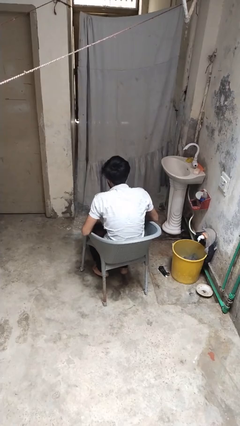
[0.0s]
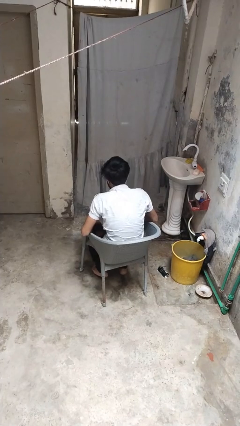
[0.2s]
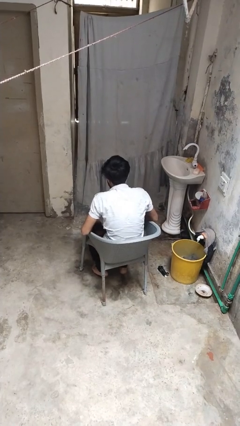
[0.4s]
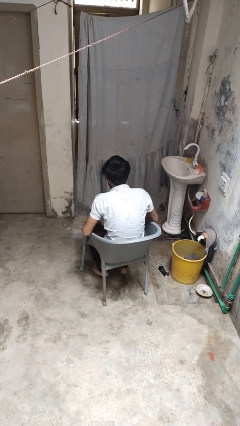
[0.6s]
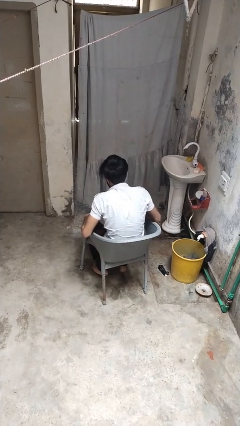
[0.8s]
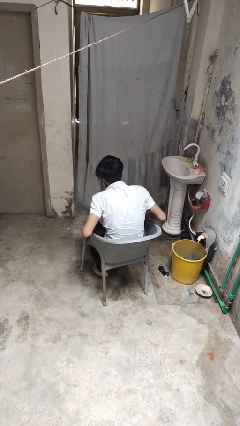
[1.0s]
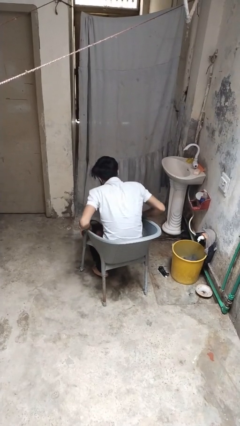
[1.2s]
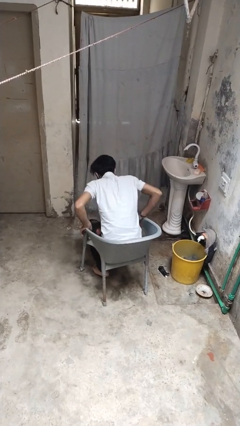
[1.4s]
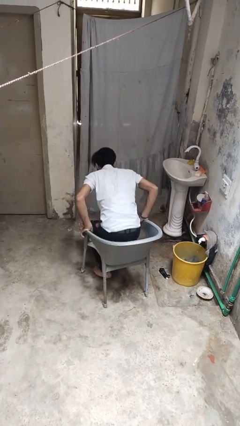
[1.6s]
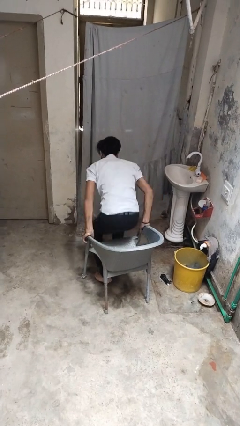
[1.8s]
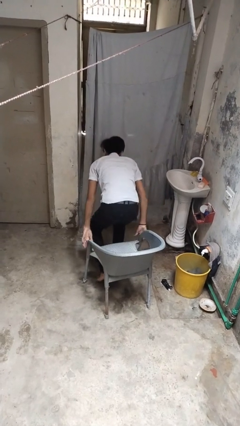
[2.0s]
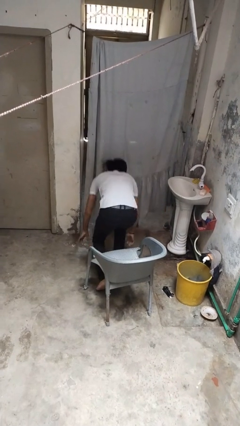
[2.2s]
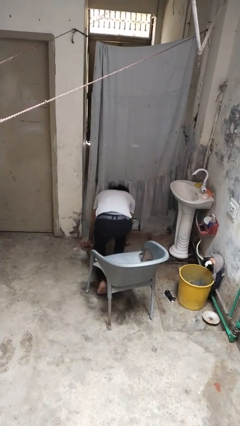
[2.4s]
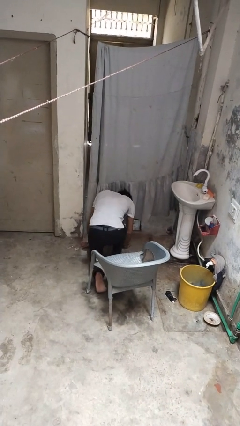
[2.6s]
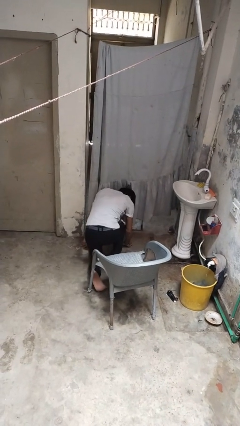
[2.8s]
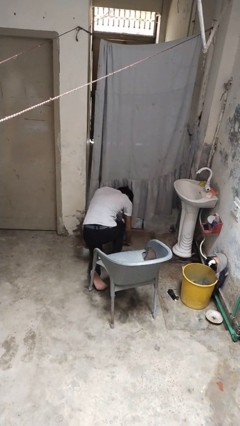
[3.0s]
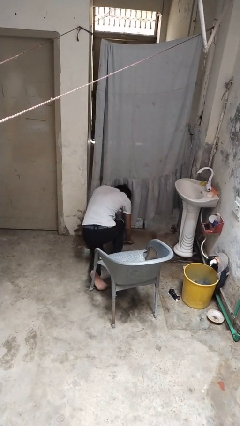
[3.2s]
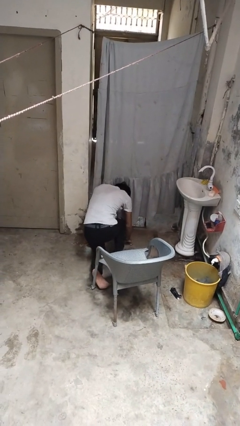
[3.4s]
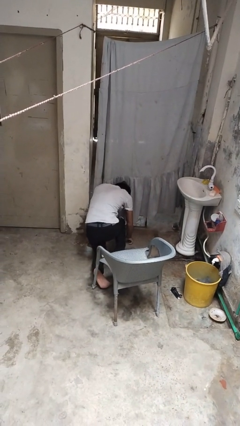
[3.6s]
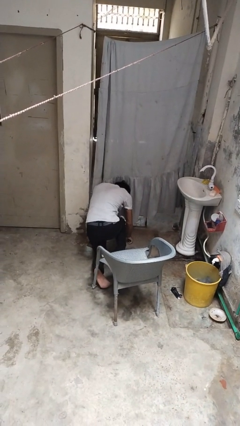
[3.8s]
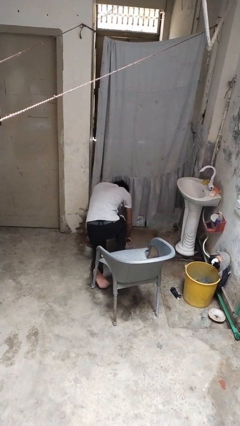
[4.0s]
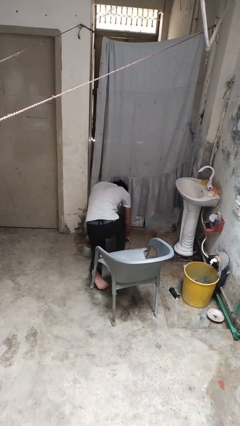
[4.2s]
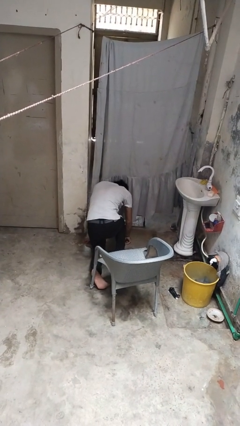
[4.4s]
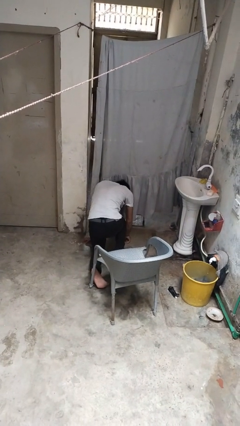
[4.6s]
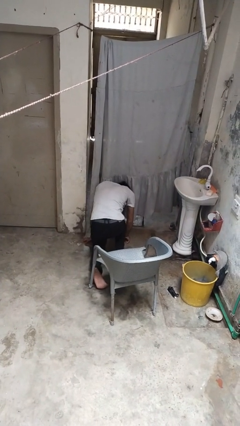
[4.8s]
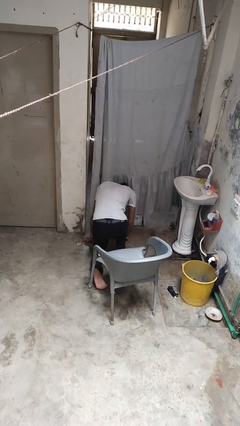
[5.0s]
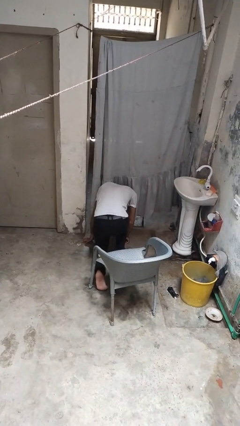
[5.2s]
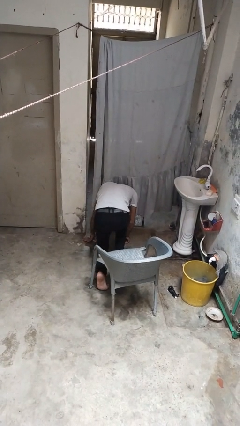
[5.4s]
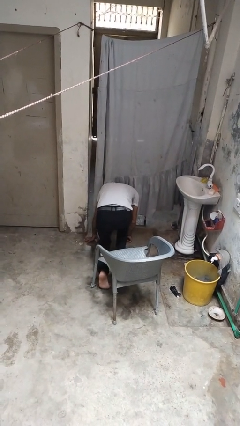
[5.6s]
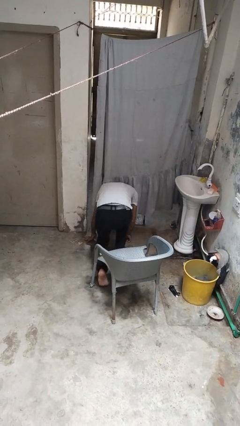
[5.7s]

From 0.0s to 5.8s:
person falls from chair

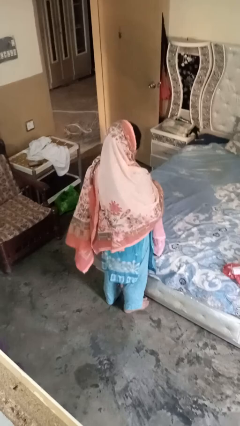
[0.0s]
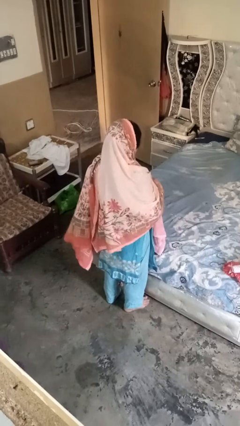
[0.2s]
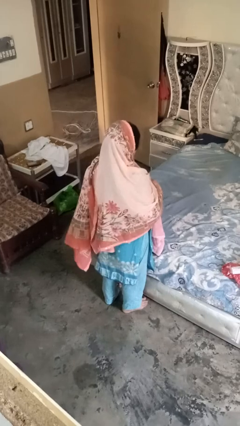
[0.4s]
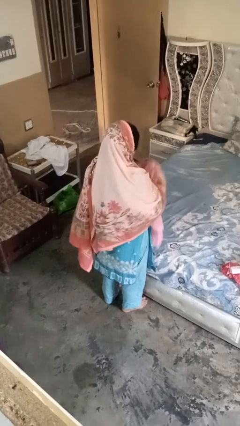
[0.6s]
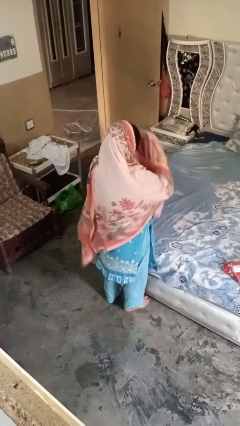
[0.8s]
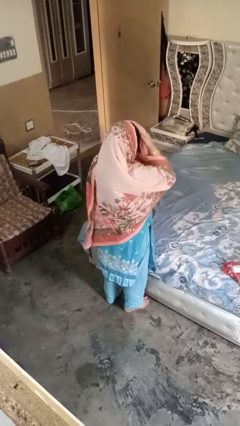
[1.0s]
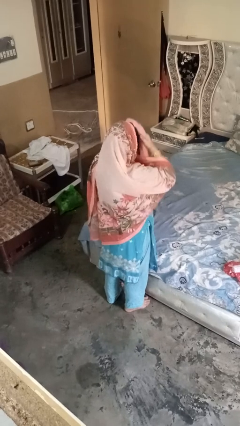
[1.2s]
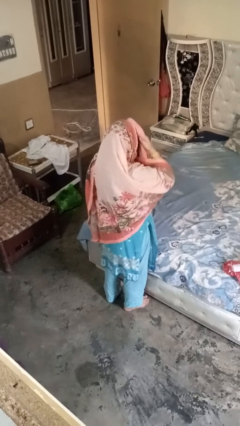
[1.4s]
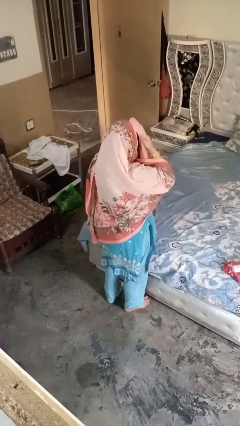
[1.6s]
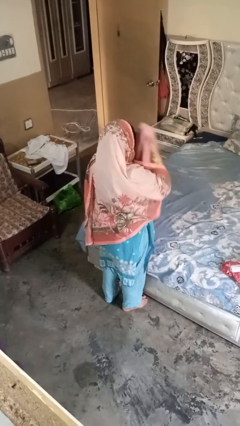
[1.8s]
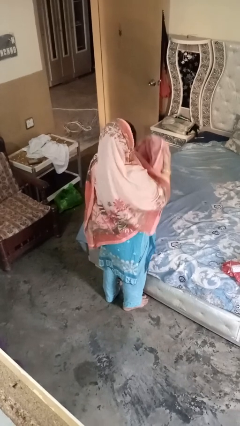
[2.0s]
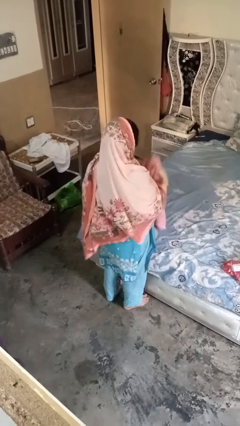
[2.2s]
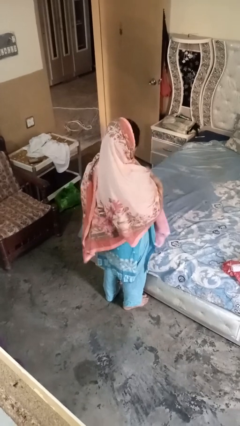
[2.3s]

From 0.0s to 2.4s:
person dries hair with towel

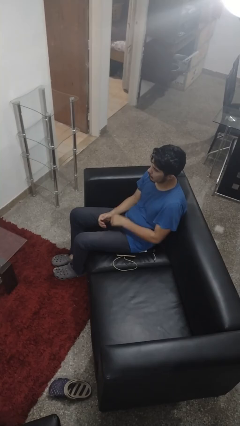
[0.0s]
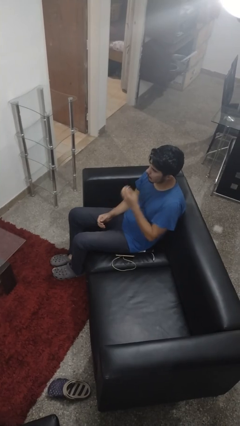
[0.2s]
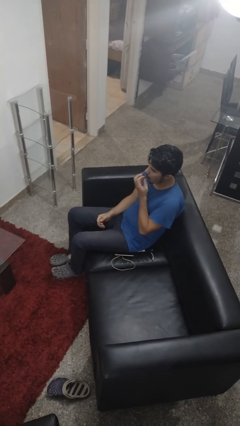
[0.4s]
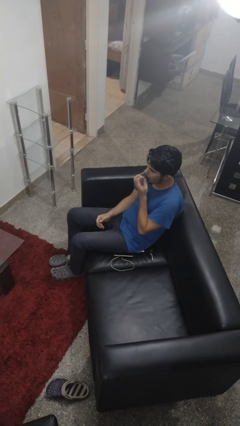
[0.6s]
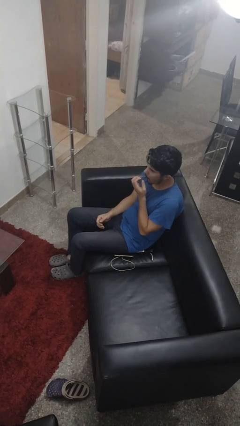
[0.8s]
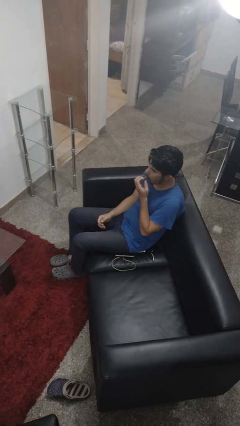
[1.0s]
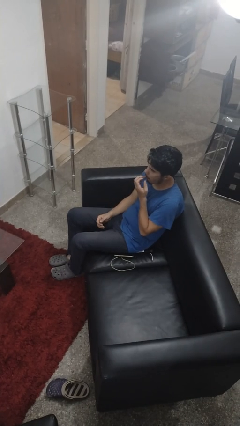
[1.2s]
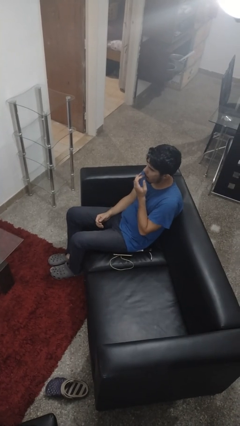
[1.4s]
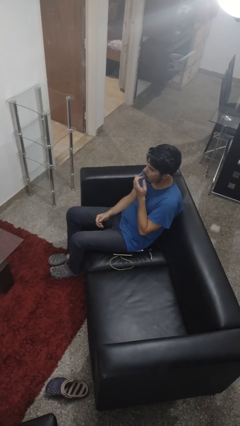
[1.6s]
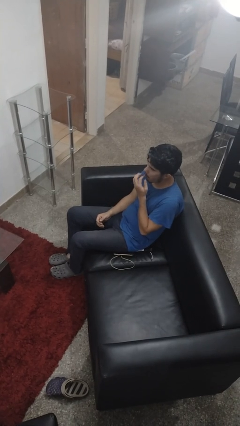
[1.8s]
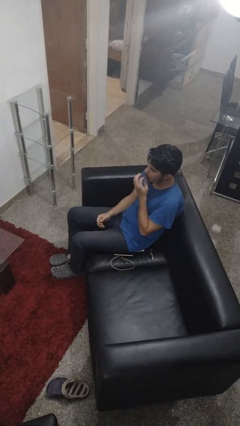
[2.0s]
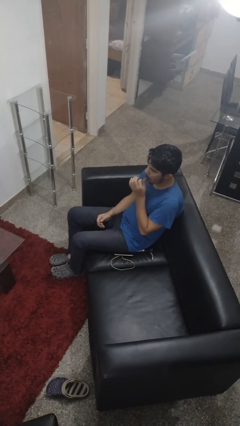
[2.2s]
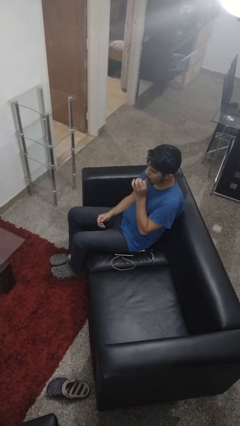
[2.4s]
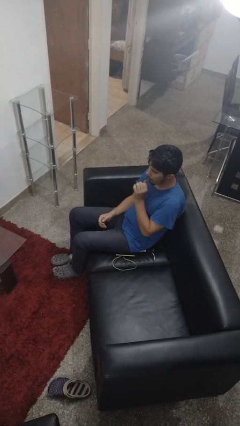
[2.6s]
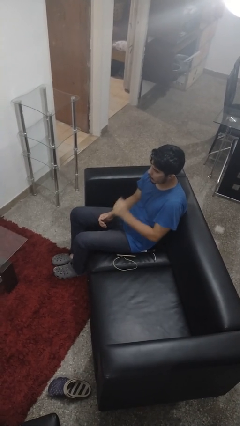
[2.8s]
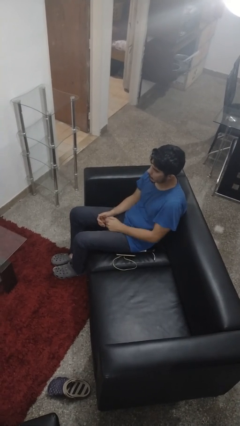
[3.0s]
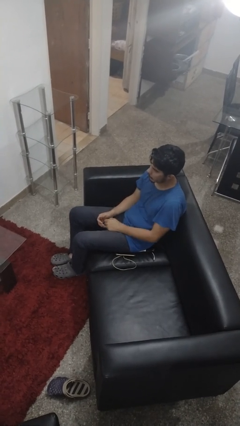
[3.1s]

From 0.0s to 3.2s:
person licks fingers

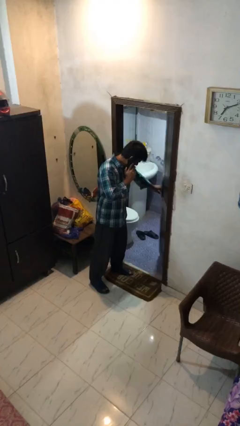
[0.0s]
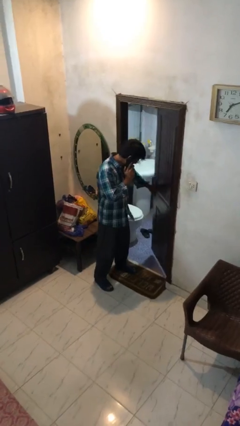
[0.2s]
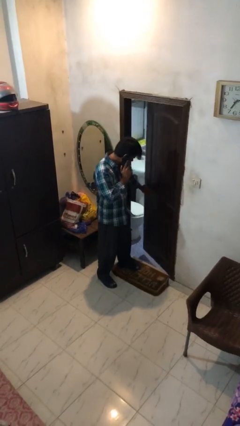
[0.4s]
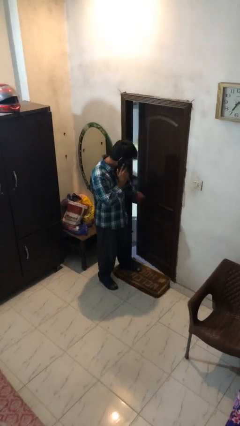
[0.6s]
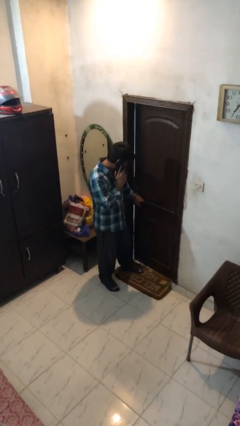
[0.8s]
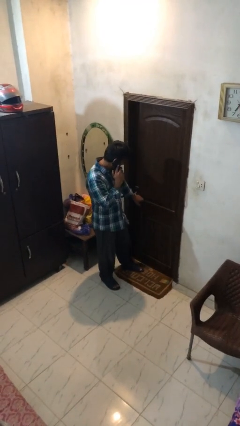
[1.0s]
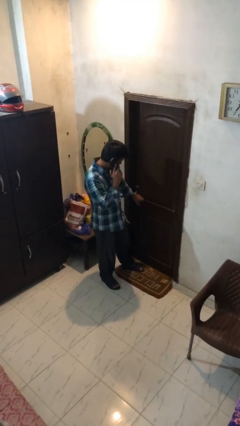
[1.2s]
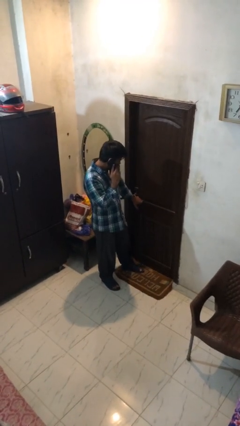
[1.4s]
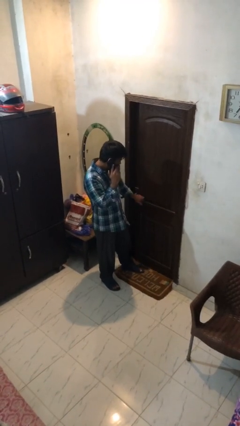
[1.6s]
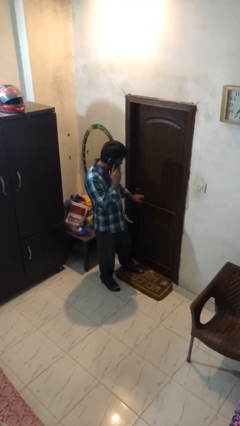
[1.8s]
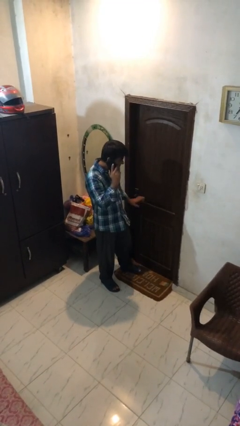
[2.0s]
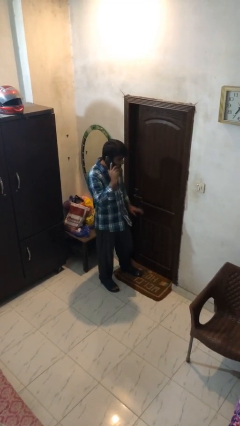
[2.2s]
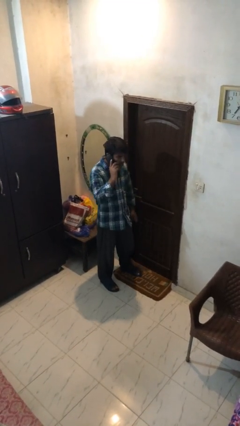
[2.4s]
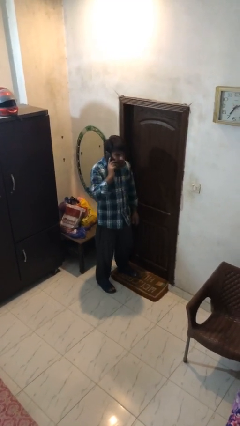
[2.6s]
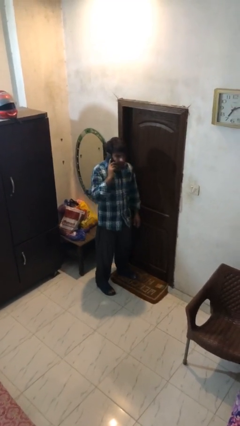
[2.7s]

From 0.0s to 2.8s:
person closes facility door

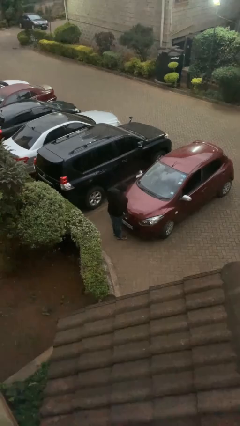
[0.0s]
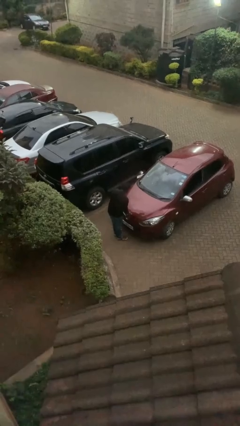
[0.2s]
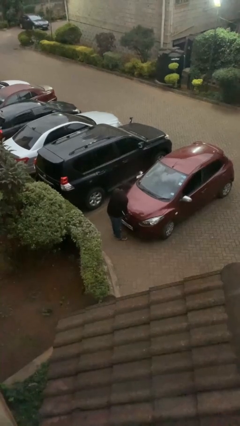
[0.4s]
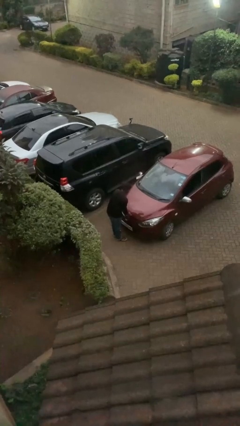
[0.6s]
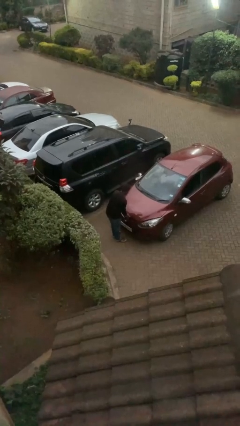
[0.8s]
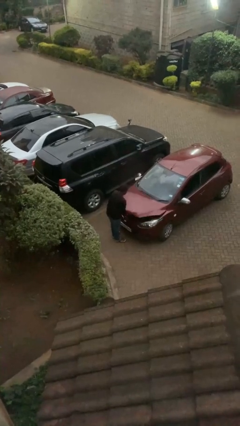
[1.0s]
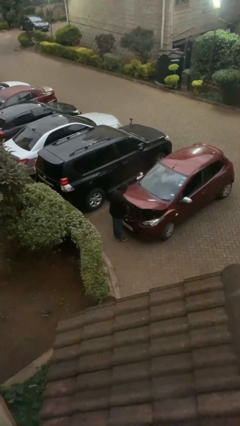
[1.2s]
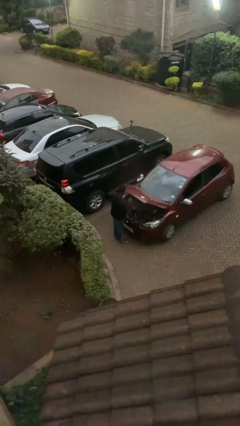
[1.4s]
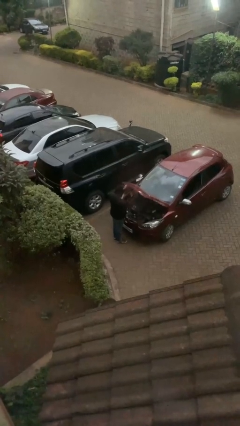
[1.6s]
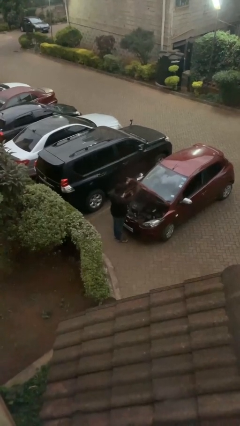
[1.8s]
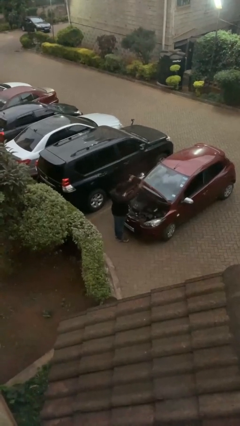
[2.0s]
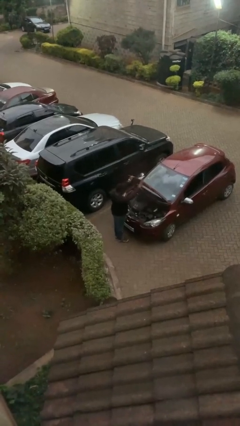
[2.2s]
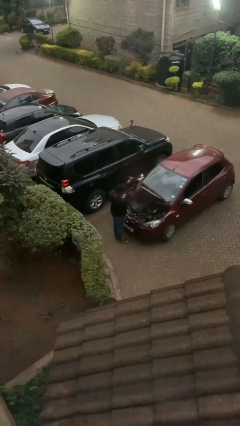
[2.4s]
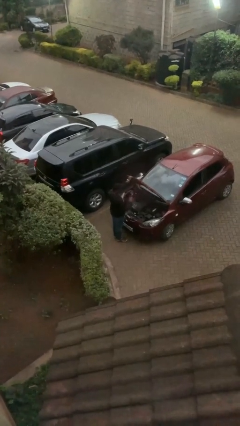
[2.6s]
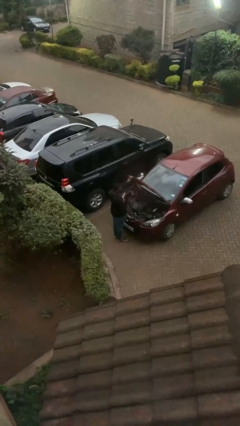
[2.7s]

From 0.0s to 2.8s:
person opens car hood

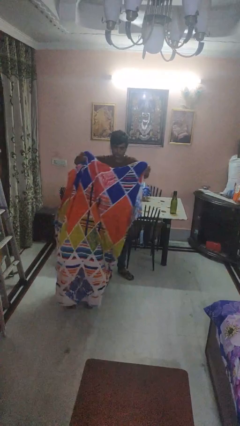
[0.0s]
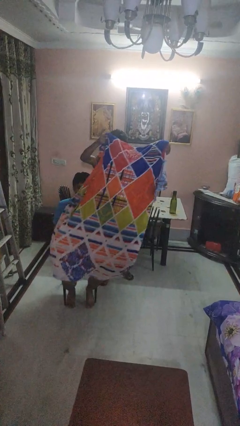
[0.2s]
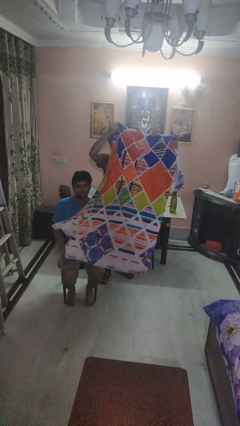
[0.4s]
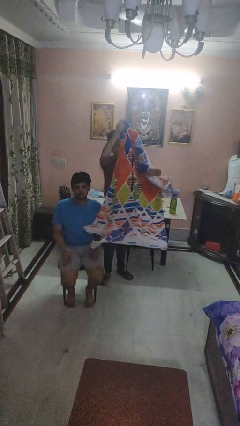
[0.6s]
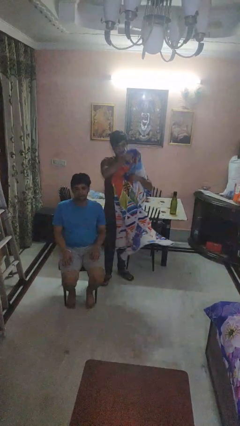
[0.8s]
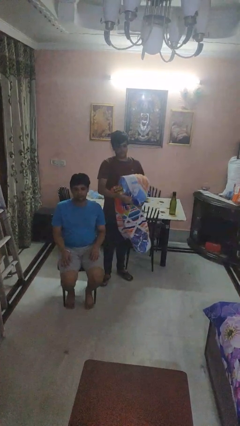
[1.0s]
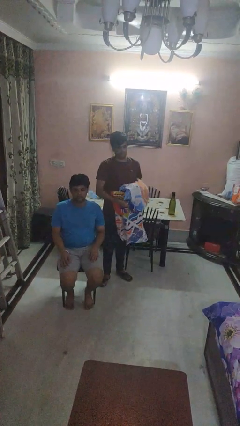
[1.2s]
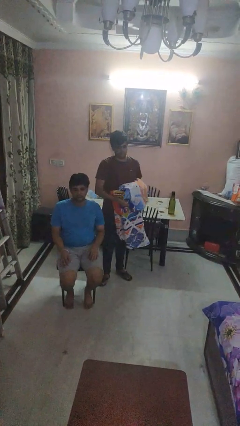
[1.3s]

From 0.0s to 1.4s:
person uncovers friend with blanket
